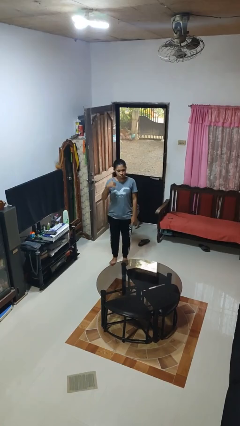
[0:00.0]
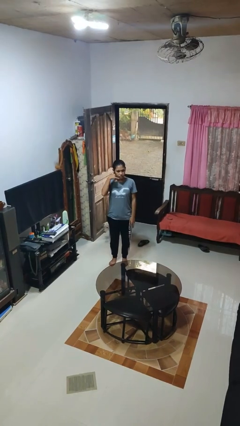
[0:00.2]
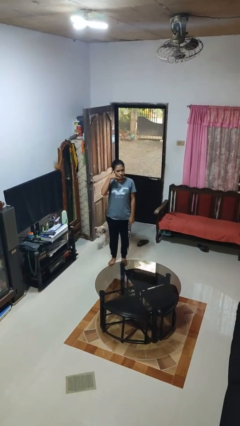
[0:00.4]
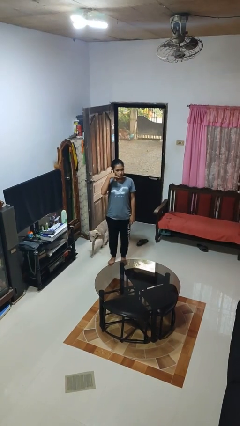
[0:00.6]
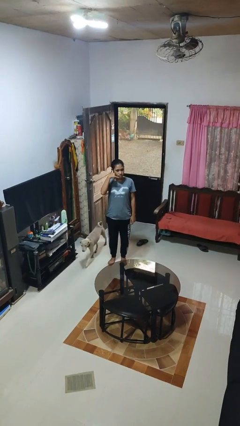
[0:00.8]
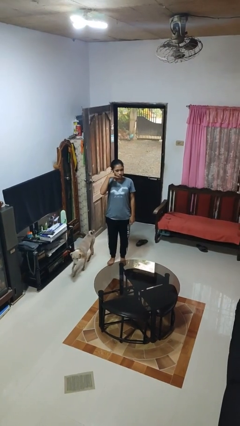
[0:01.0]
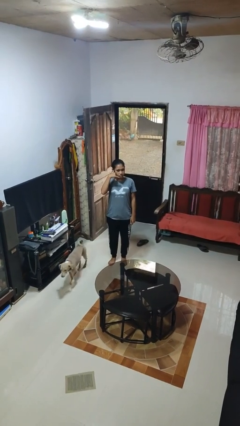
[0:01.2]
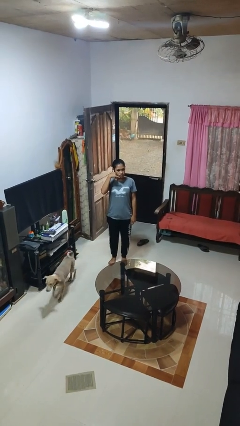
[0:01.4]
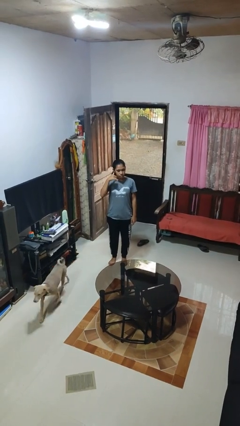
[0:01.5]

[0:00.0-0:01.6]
person gestures call me

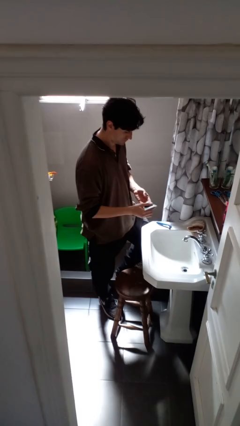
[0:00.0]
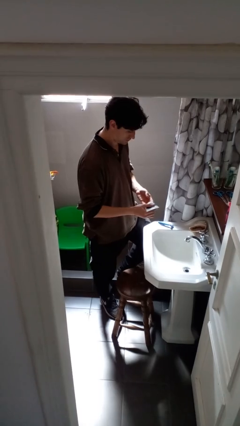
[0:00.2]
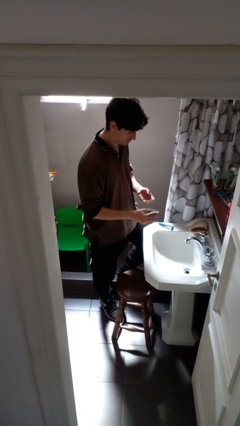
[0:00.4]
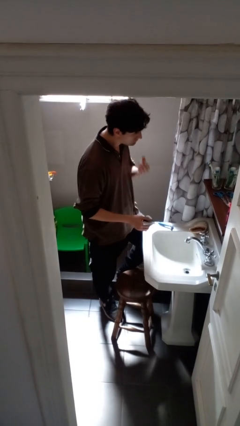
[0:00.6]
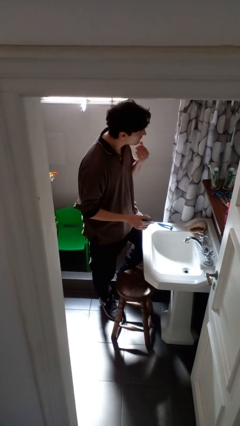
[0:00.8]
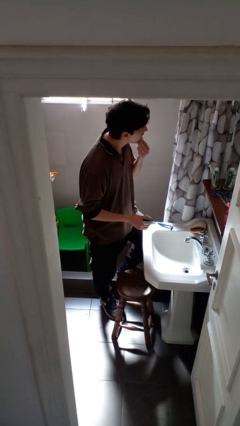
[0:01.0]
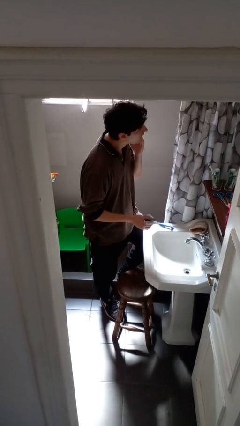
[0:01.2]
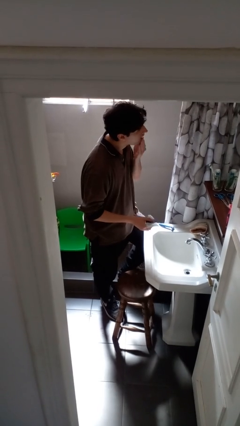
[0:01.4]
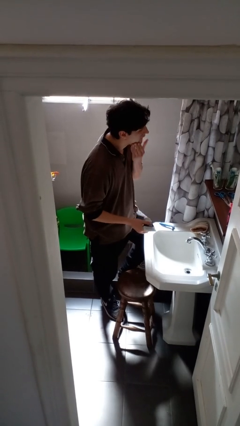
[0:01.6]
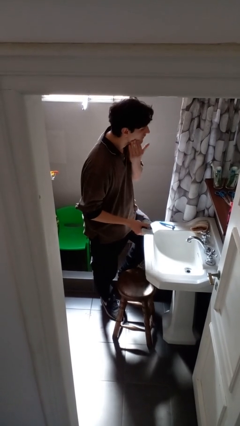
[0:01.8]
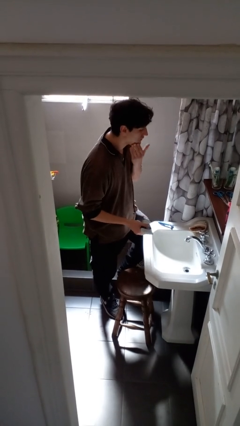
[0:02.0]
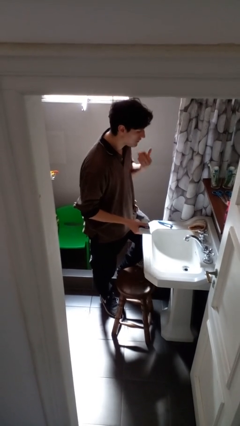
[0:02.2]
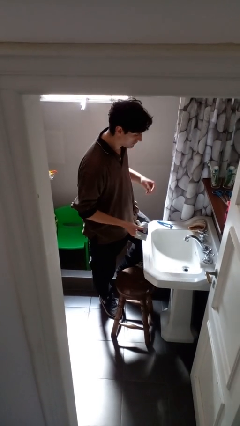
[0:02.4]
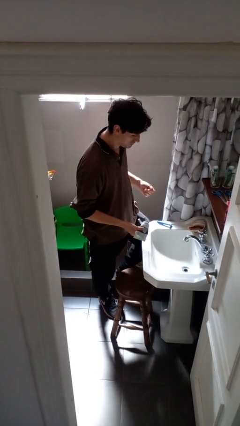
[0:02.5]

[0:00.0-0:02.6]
person applies shaving cream

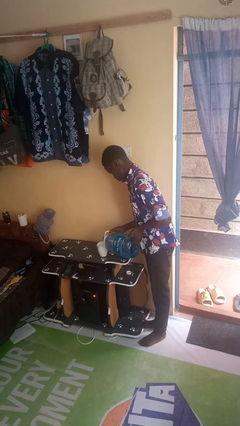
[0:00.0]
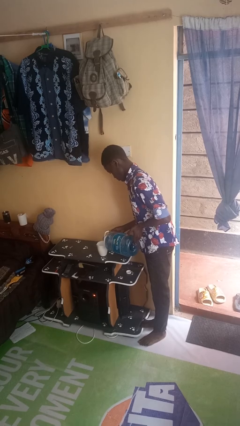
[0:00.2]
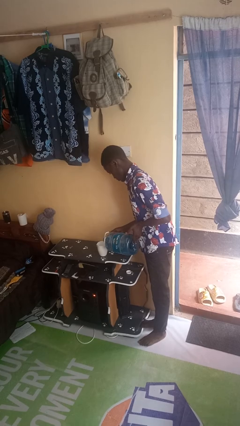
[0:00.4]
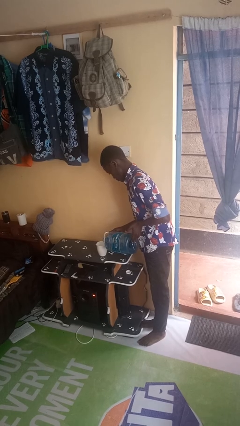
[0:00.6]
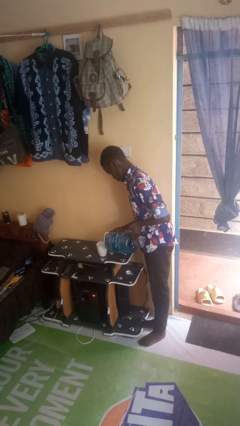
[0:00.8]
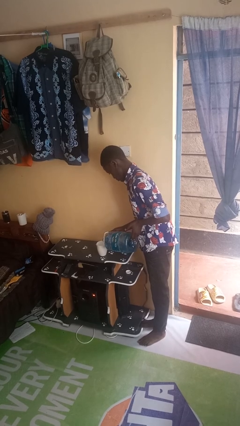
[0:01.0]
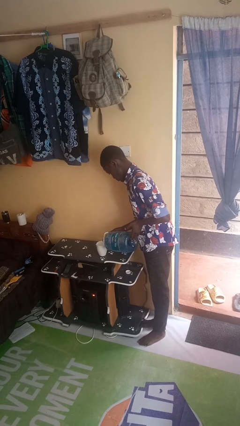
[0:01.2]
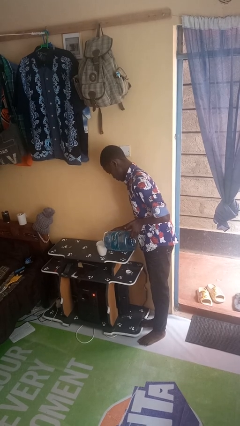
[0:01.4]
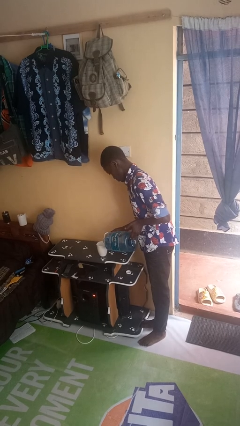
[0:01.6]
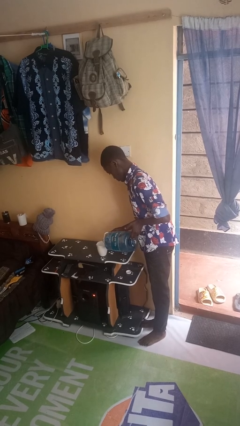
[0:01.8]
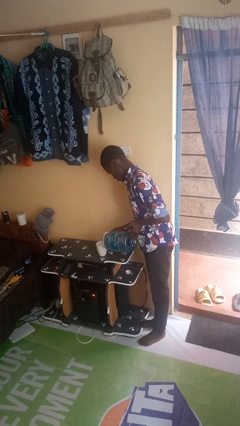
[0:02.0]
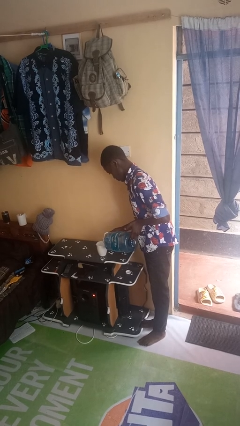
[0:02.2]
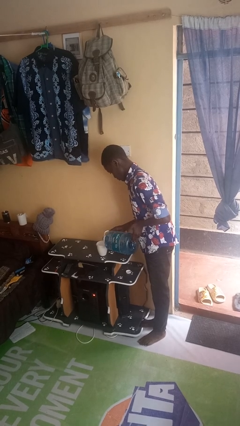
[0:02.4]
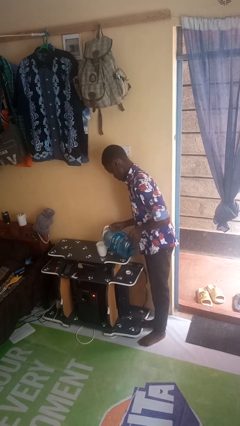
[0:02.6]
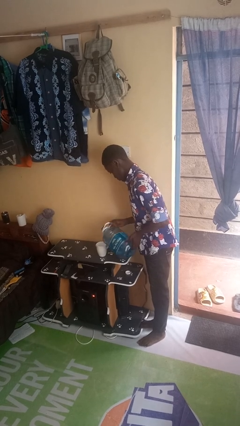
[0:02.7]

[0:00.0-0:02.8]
person pours liquid into cup

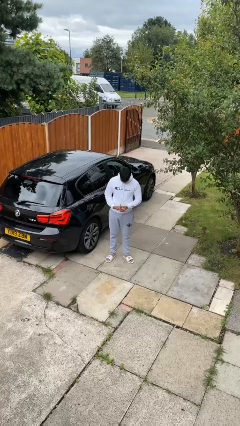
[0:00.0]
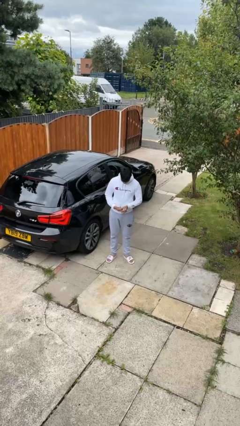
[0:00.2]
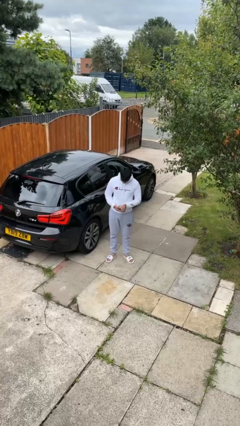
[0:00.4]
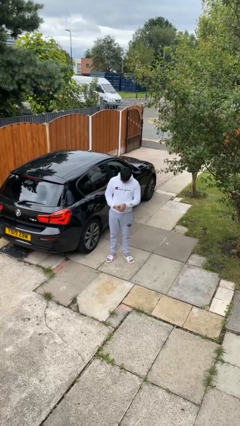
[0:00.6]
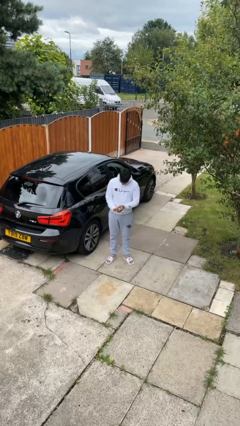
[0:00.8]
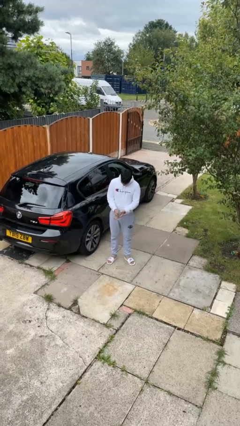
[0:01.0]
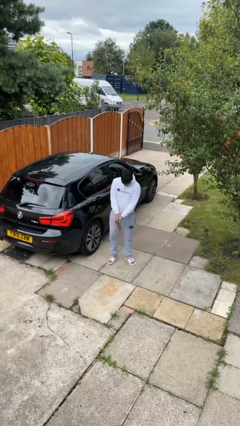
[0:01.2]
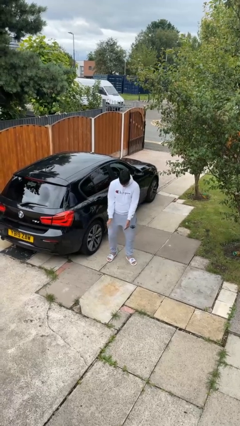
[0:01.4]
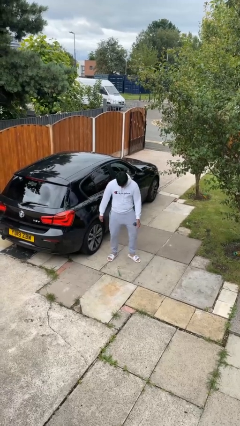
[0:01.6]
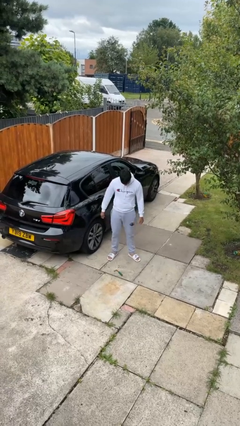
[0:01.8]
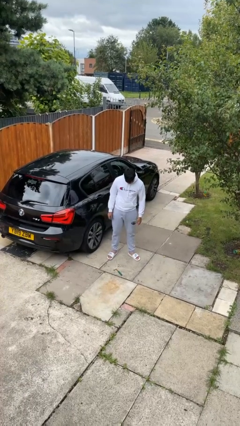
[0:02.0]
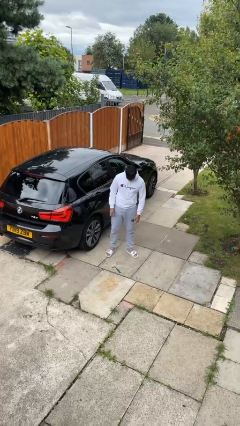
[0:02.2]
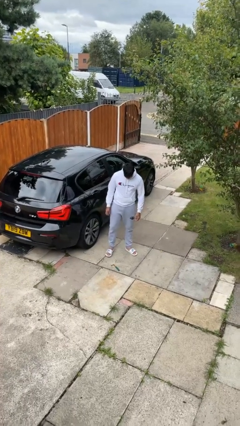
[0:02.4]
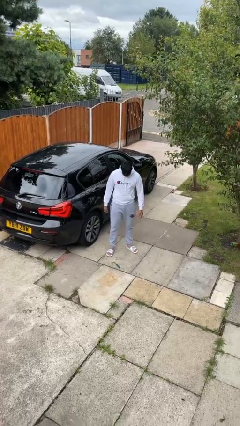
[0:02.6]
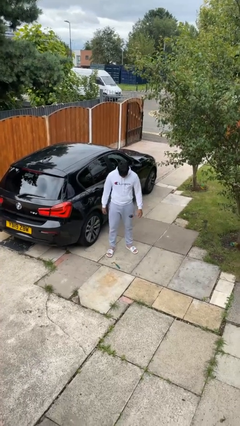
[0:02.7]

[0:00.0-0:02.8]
person drops object

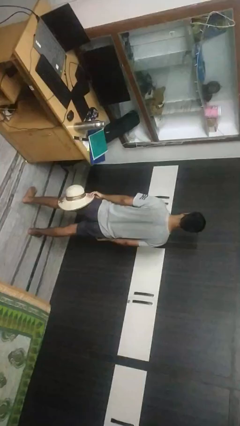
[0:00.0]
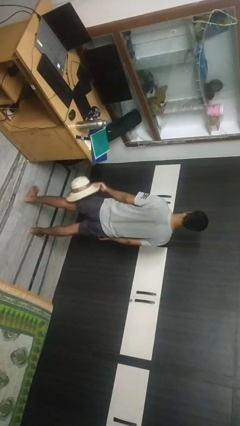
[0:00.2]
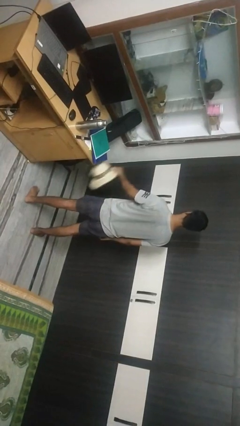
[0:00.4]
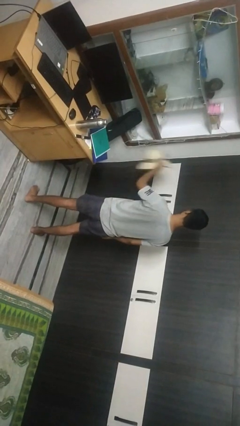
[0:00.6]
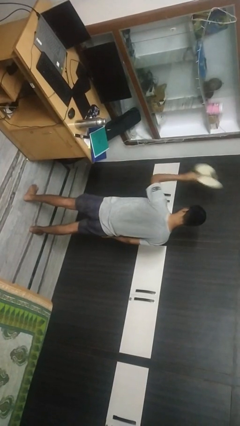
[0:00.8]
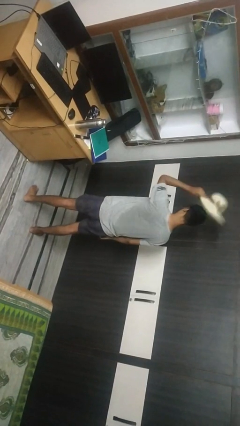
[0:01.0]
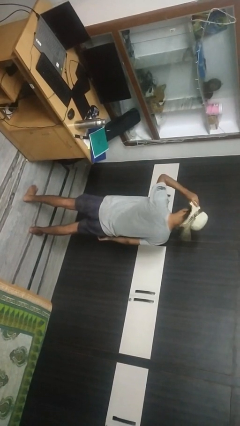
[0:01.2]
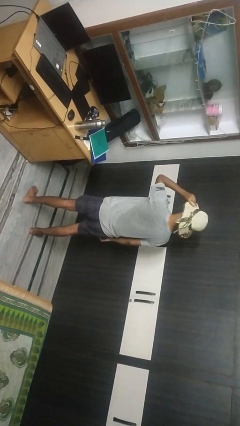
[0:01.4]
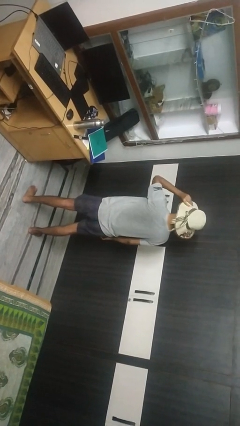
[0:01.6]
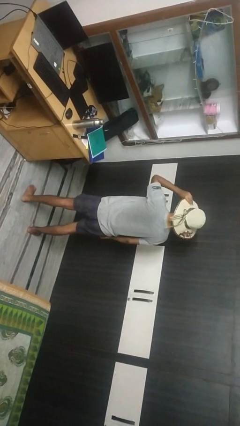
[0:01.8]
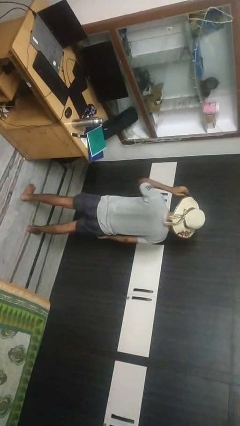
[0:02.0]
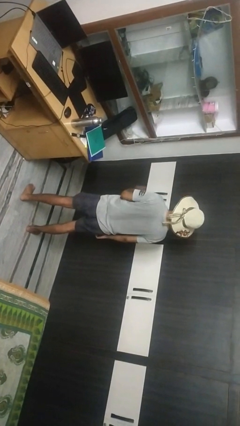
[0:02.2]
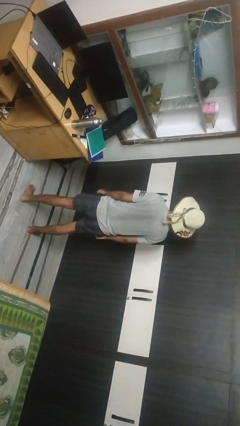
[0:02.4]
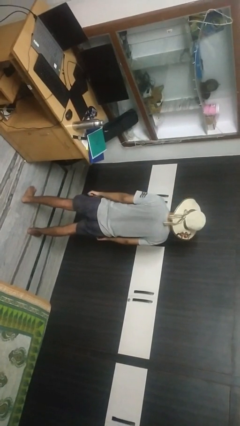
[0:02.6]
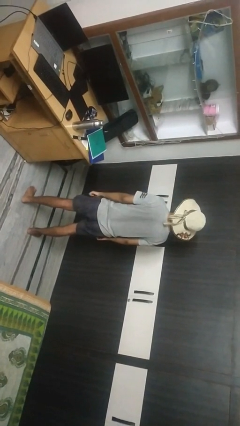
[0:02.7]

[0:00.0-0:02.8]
person puts on hat

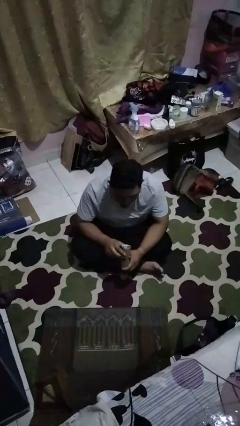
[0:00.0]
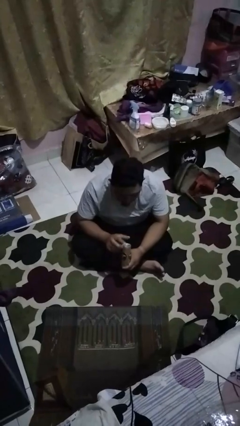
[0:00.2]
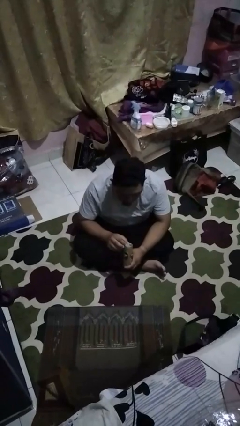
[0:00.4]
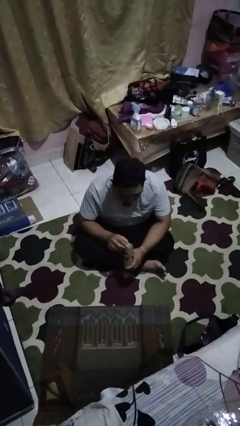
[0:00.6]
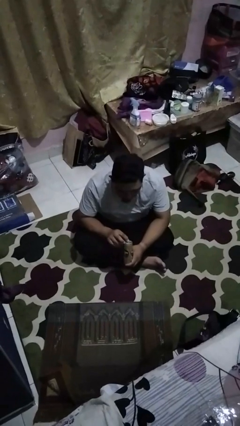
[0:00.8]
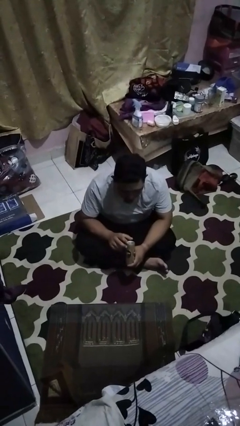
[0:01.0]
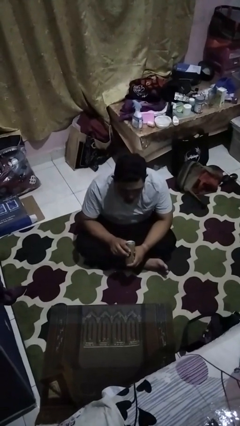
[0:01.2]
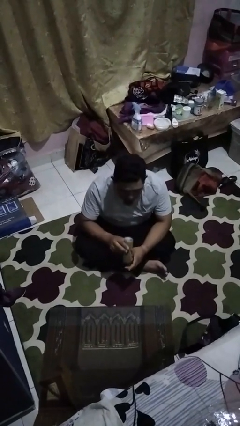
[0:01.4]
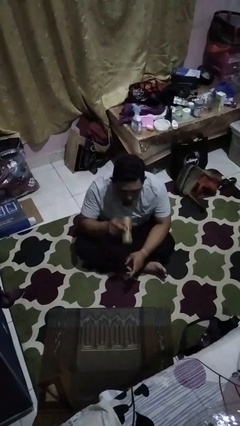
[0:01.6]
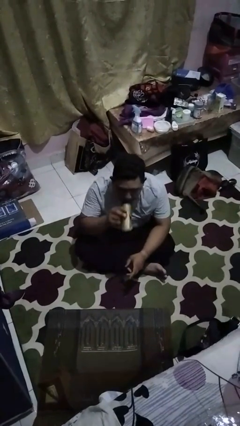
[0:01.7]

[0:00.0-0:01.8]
person opens beverage can

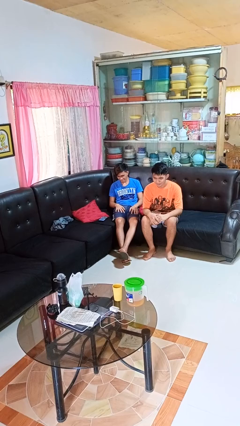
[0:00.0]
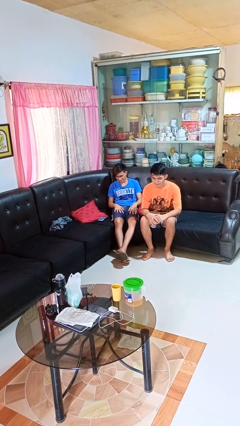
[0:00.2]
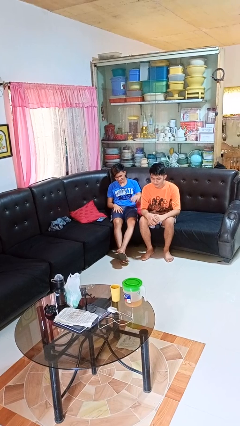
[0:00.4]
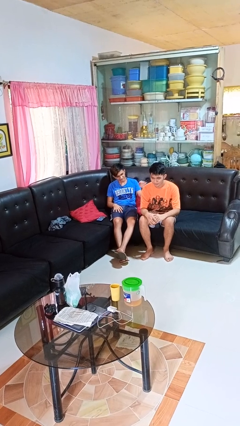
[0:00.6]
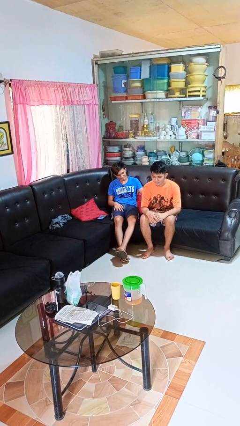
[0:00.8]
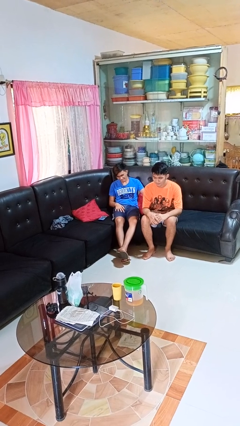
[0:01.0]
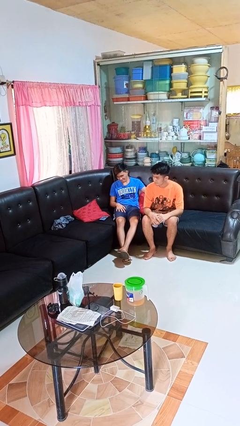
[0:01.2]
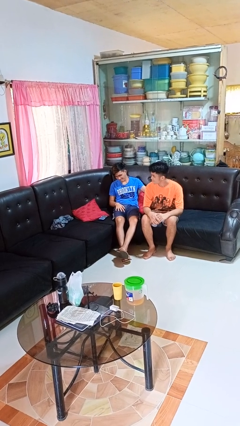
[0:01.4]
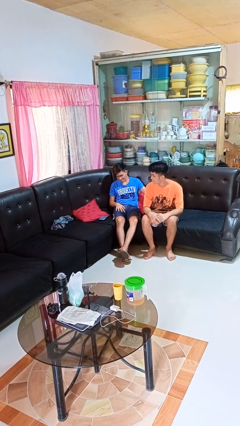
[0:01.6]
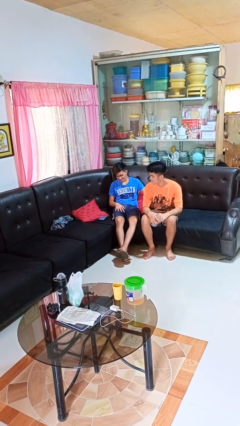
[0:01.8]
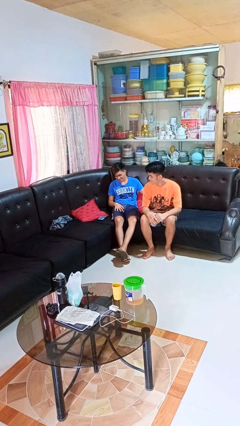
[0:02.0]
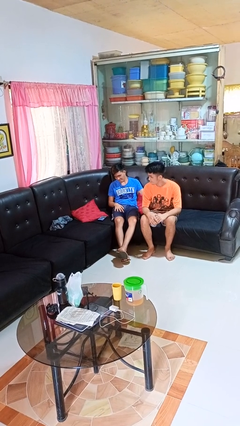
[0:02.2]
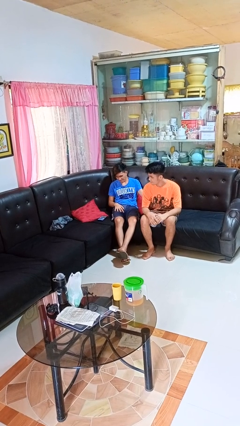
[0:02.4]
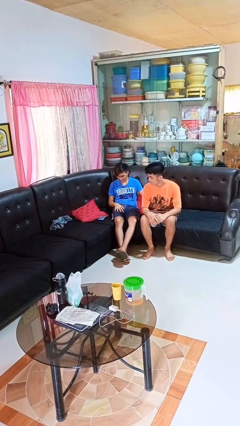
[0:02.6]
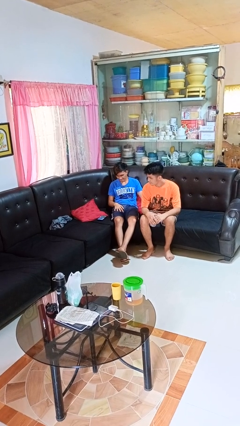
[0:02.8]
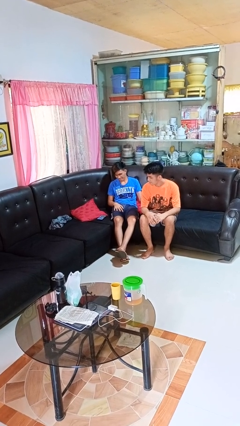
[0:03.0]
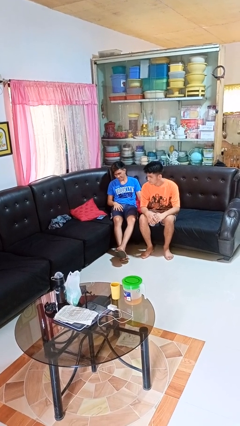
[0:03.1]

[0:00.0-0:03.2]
person touches back of person
